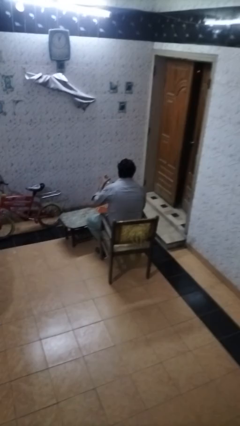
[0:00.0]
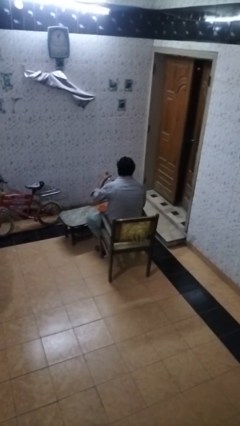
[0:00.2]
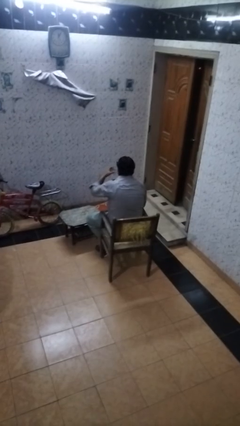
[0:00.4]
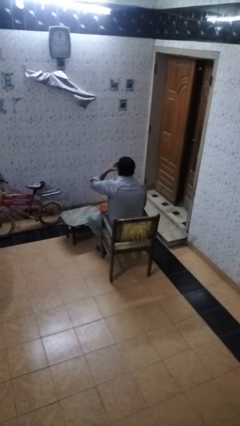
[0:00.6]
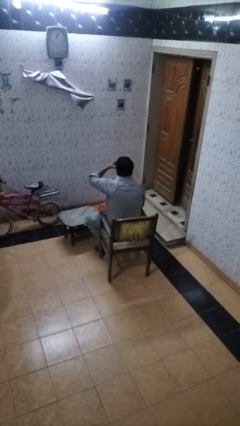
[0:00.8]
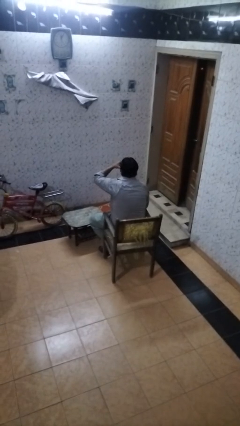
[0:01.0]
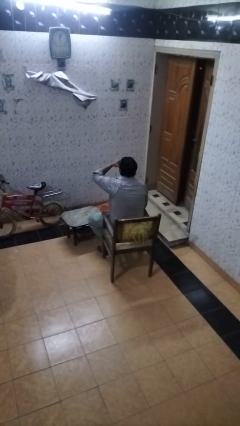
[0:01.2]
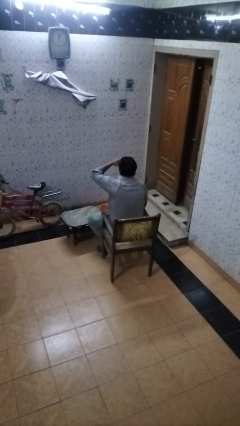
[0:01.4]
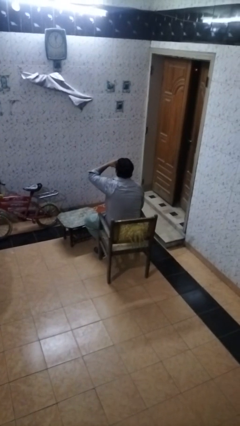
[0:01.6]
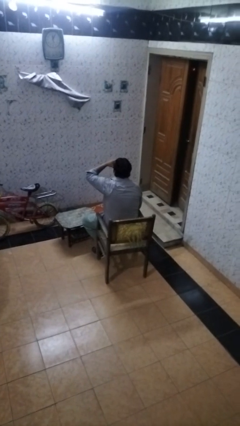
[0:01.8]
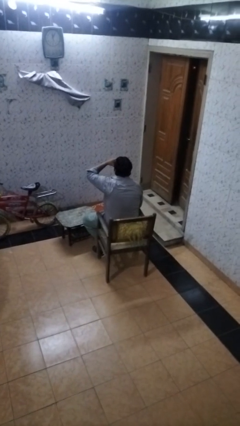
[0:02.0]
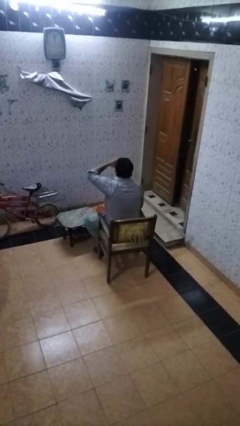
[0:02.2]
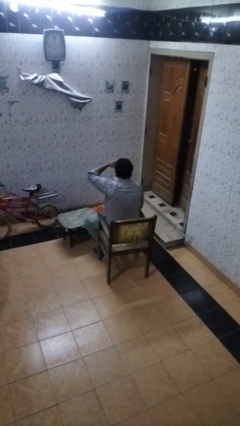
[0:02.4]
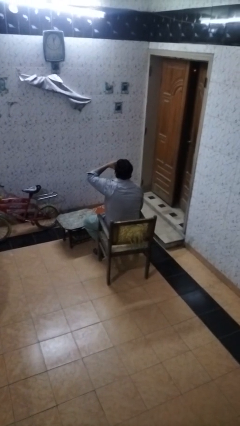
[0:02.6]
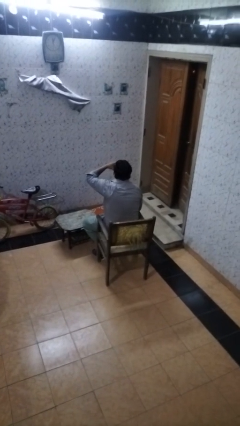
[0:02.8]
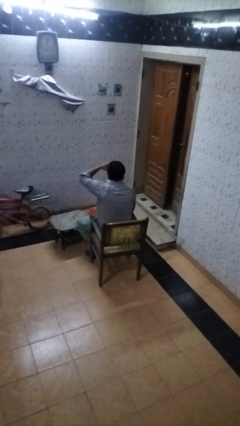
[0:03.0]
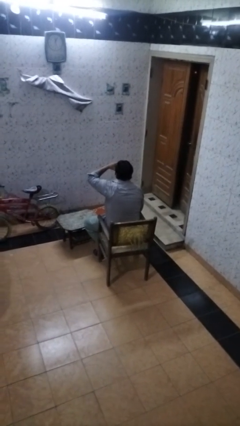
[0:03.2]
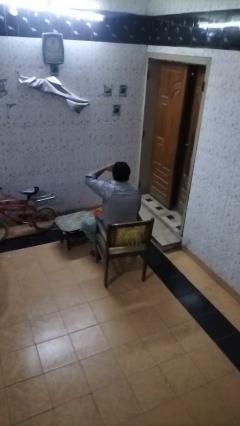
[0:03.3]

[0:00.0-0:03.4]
person drinks from shotglass

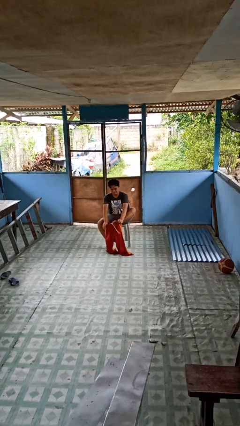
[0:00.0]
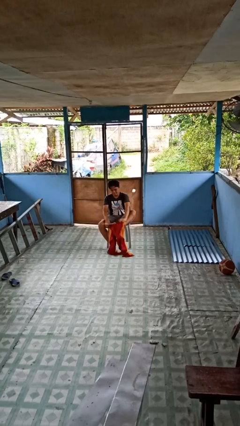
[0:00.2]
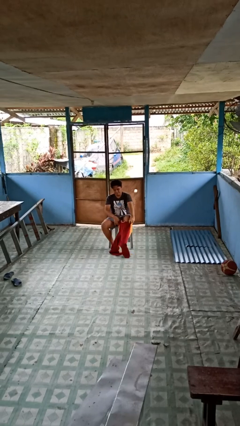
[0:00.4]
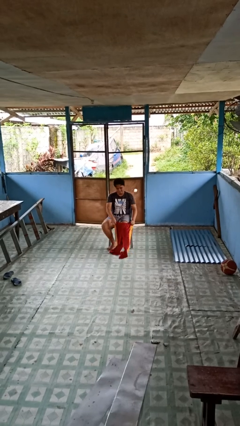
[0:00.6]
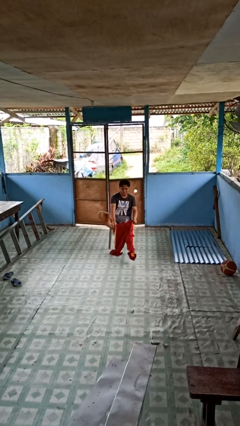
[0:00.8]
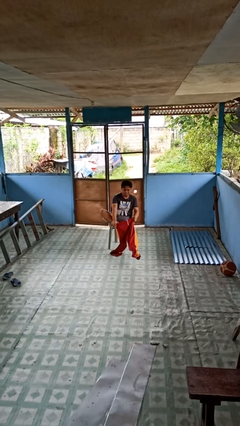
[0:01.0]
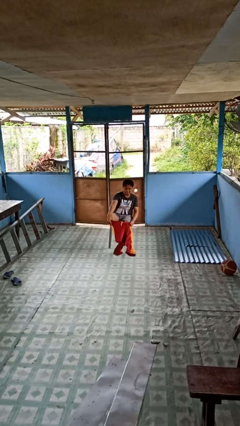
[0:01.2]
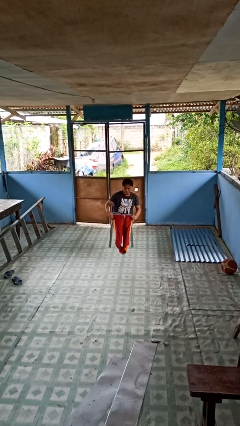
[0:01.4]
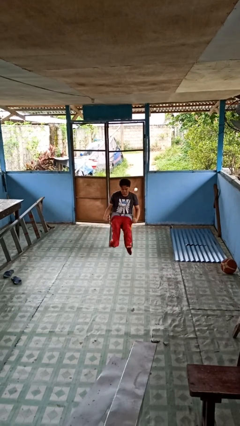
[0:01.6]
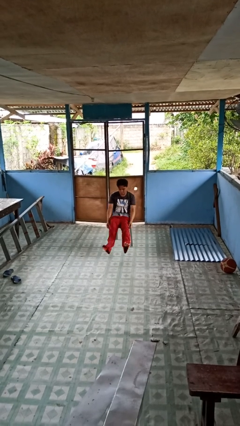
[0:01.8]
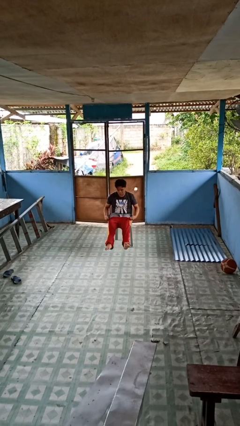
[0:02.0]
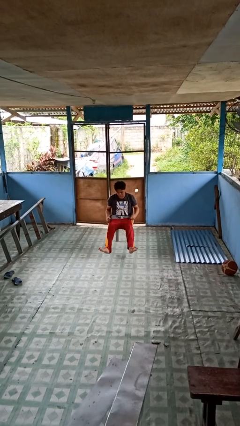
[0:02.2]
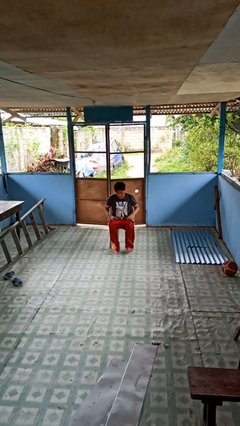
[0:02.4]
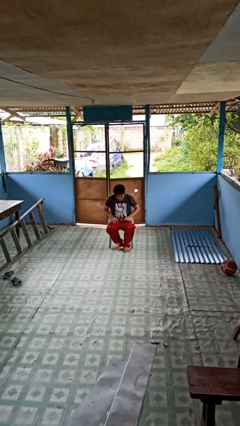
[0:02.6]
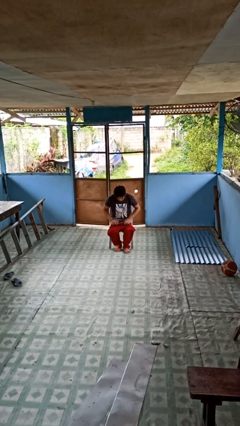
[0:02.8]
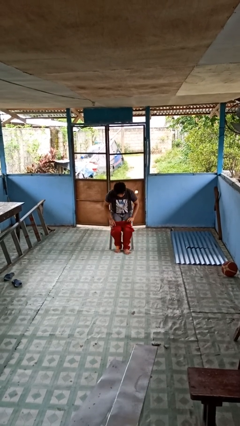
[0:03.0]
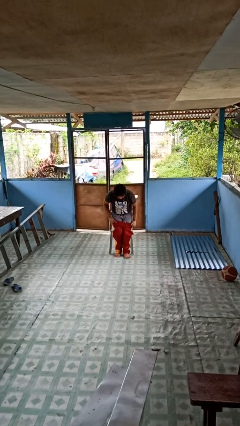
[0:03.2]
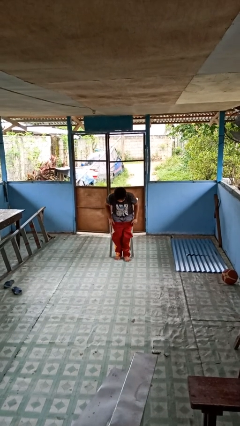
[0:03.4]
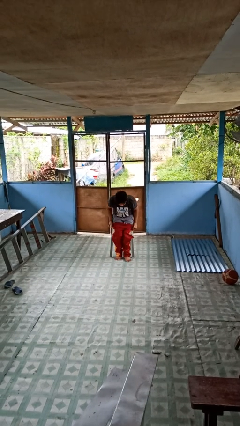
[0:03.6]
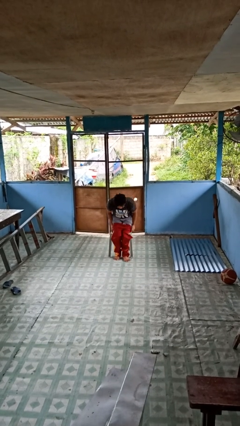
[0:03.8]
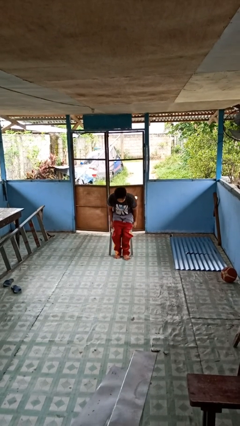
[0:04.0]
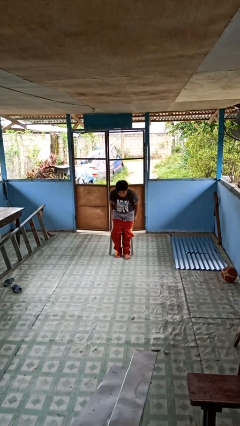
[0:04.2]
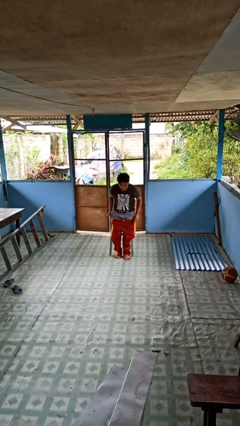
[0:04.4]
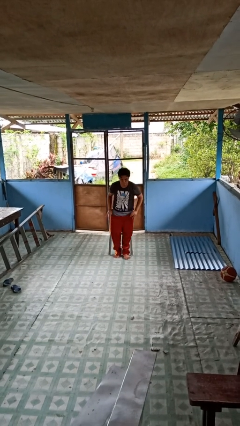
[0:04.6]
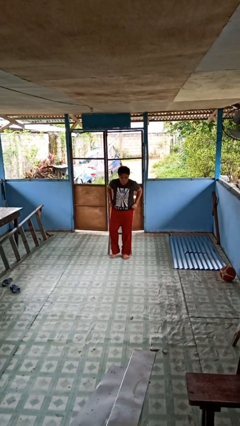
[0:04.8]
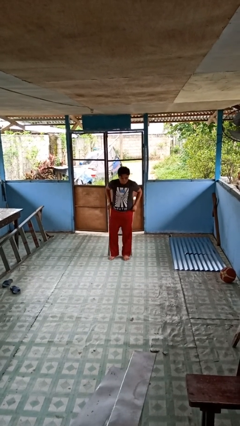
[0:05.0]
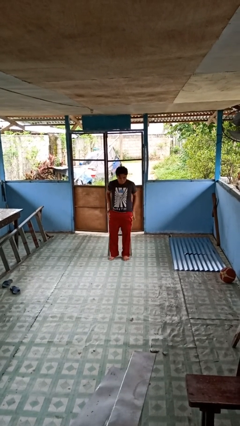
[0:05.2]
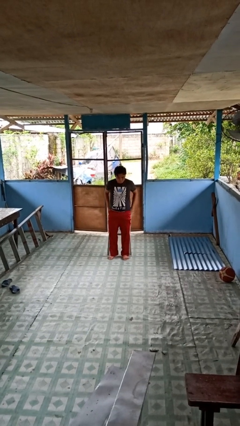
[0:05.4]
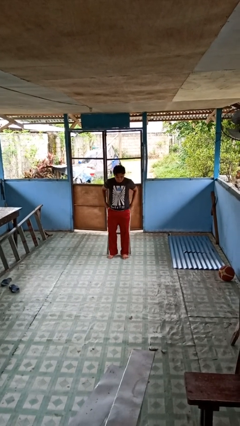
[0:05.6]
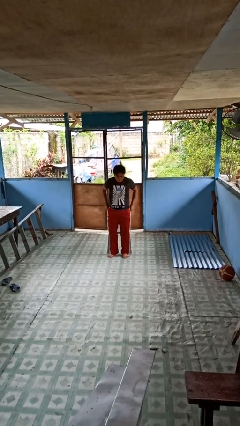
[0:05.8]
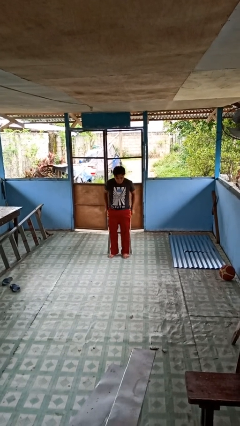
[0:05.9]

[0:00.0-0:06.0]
person puts on pants

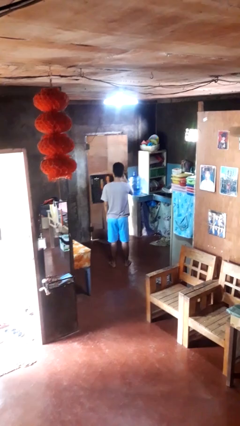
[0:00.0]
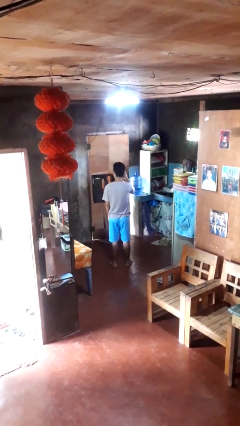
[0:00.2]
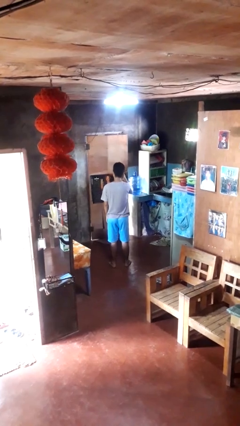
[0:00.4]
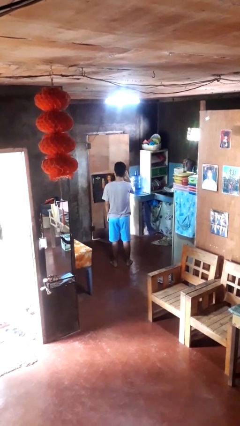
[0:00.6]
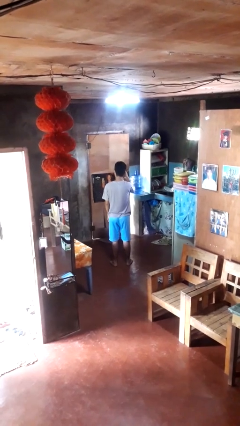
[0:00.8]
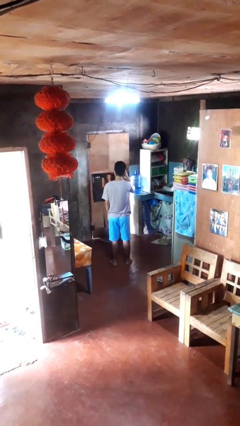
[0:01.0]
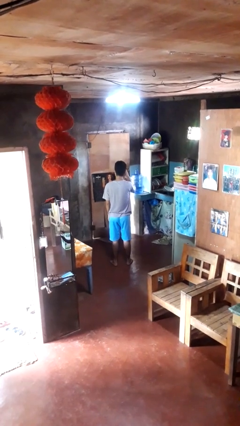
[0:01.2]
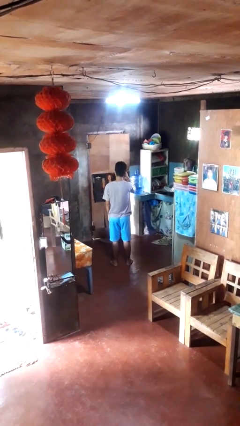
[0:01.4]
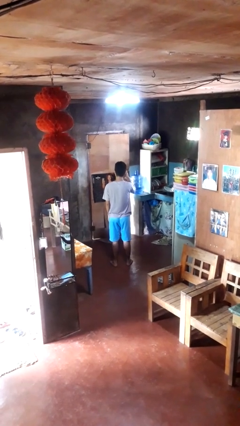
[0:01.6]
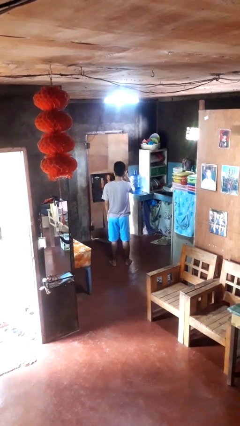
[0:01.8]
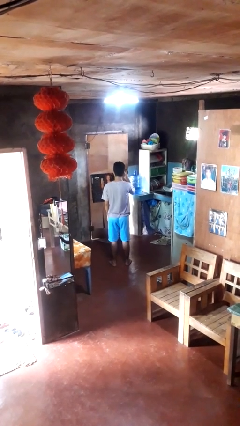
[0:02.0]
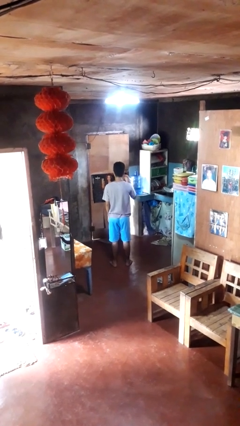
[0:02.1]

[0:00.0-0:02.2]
person rubs eyes

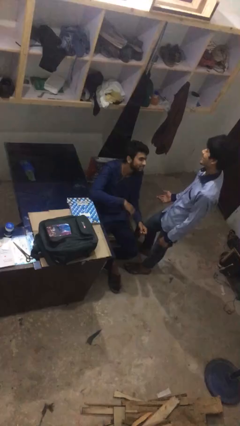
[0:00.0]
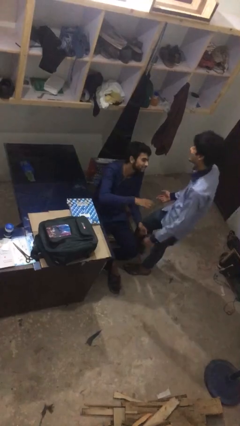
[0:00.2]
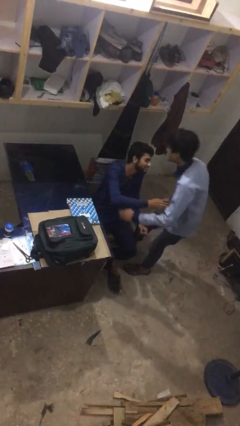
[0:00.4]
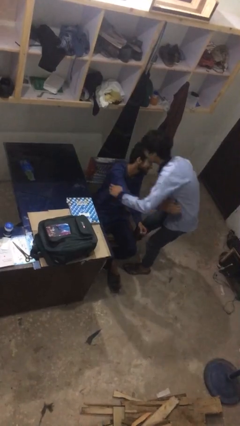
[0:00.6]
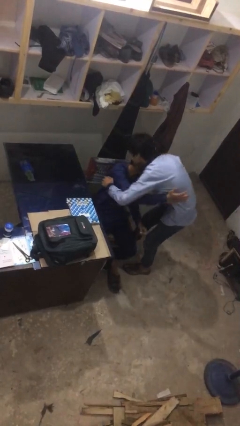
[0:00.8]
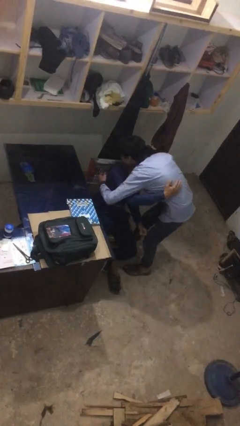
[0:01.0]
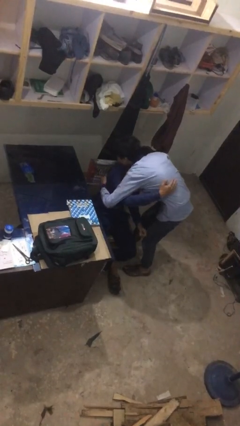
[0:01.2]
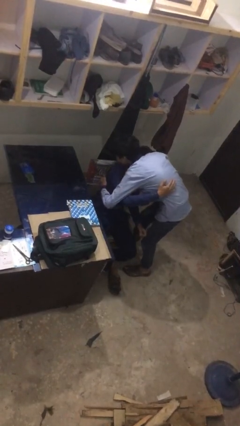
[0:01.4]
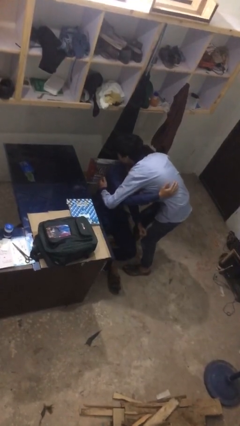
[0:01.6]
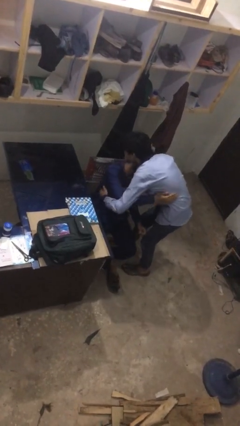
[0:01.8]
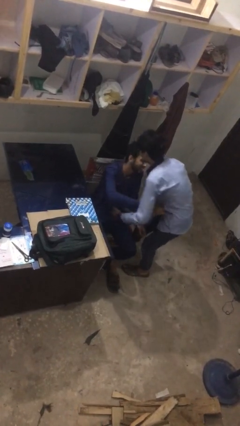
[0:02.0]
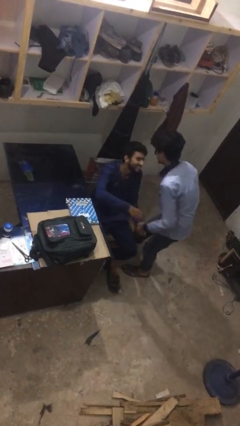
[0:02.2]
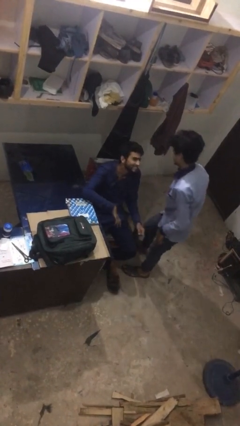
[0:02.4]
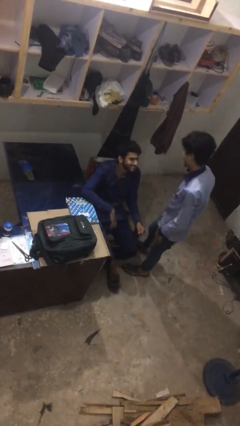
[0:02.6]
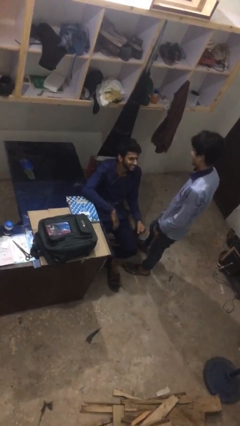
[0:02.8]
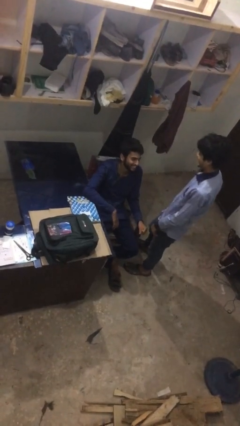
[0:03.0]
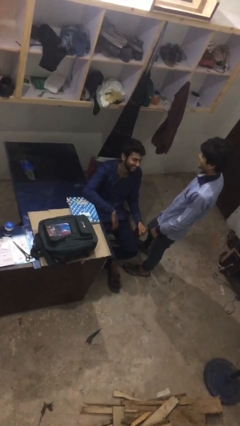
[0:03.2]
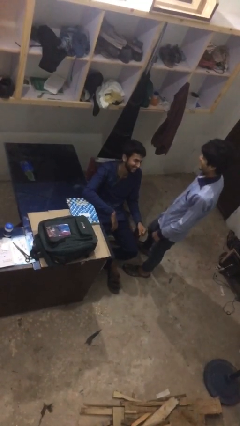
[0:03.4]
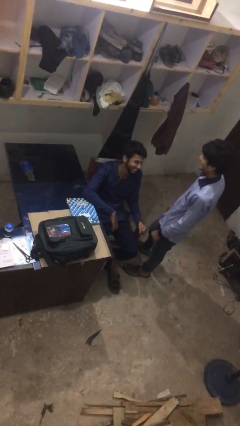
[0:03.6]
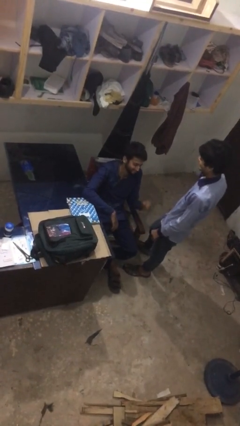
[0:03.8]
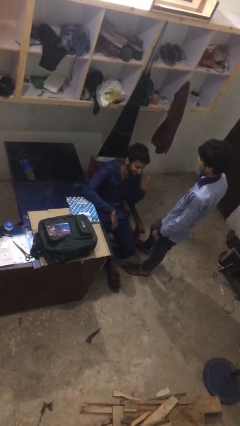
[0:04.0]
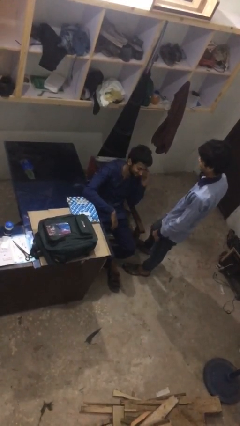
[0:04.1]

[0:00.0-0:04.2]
person embraces person

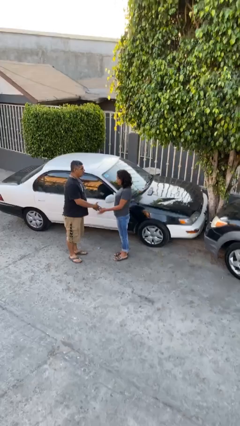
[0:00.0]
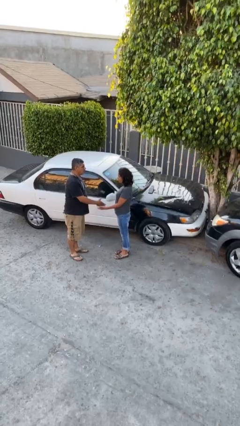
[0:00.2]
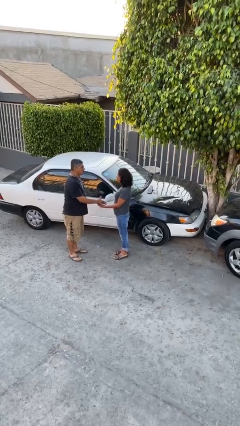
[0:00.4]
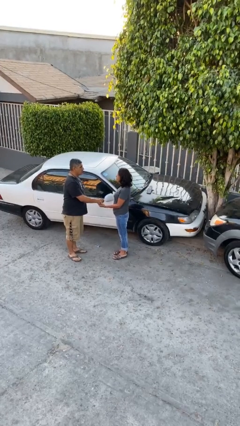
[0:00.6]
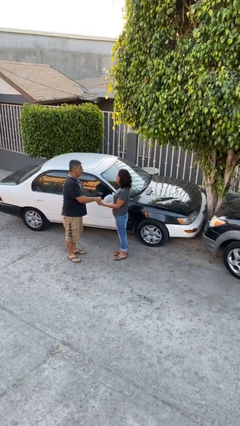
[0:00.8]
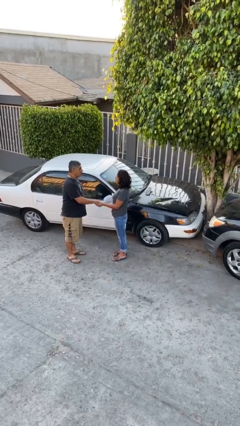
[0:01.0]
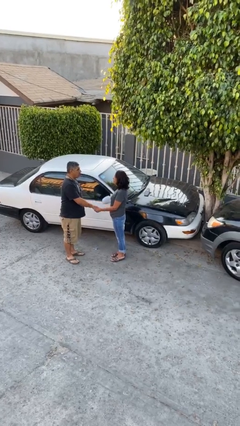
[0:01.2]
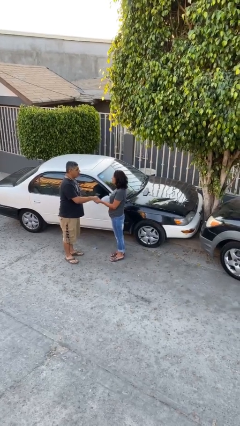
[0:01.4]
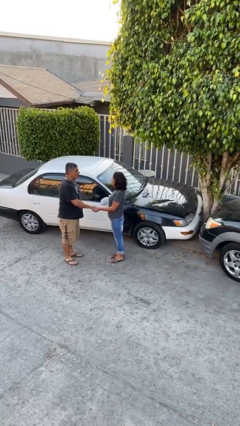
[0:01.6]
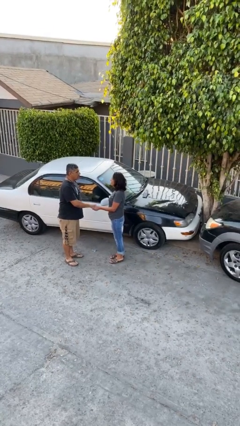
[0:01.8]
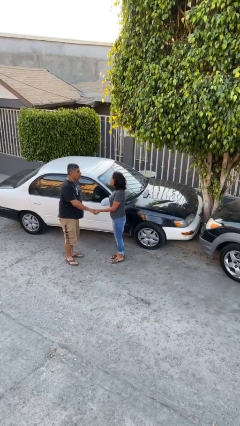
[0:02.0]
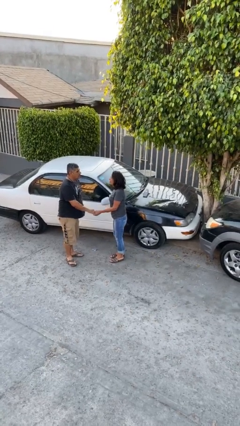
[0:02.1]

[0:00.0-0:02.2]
person shakes hand
